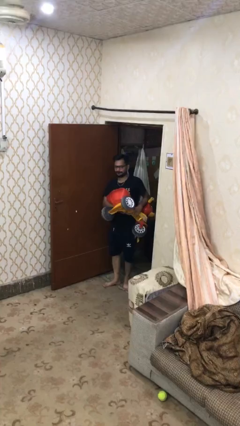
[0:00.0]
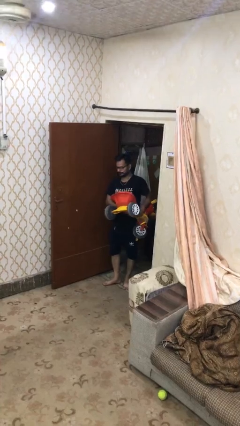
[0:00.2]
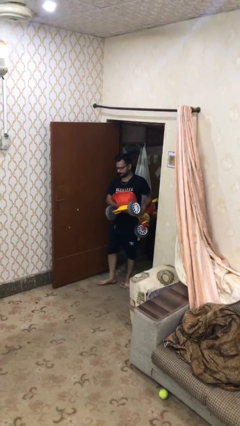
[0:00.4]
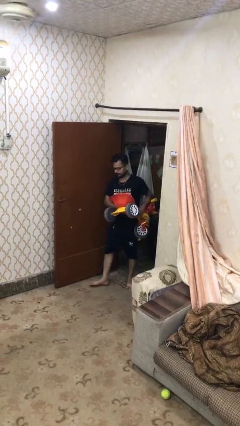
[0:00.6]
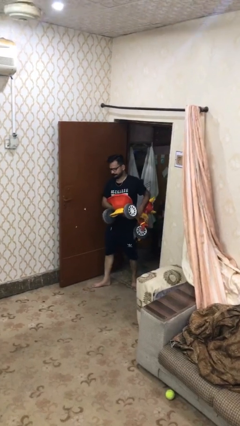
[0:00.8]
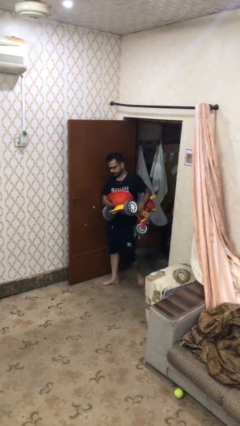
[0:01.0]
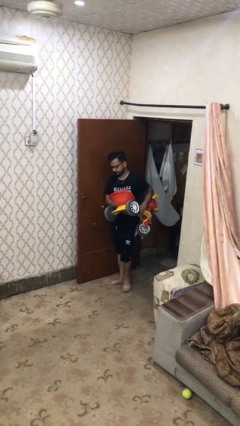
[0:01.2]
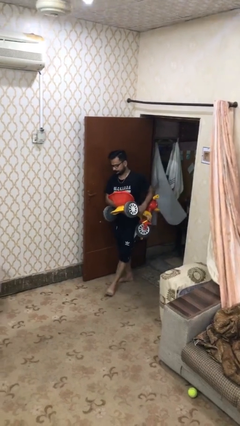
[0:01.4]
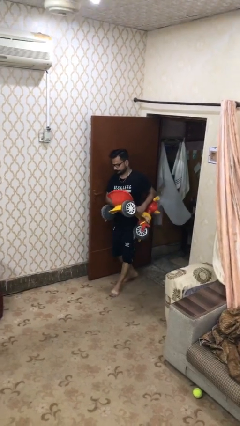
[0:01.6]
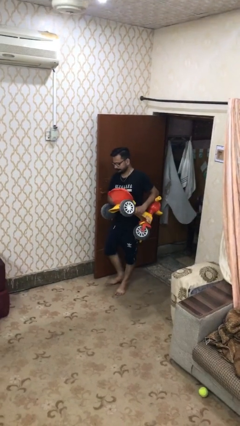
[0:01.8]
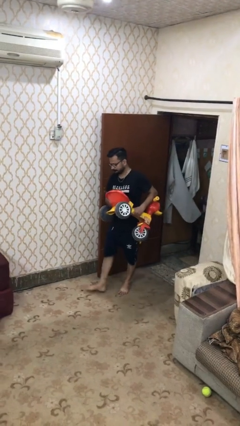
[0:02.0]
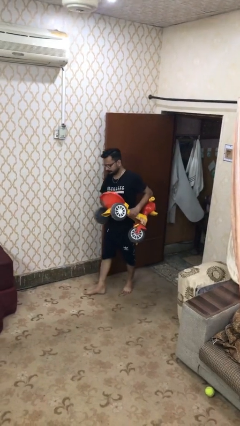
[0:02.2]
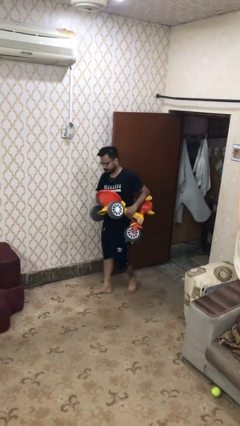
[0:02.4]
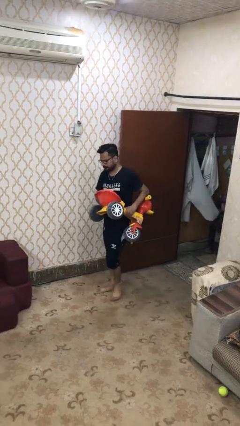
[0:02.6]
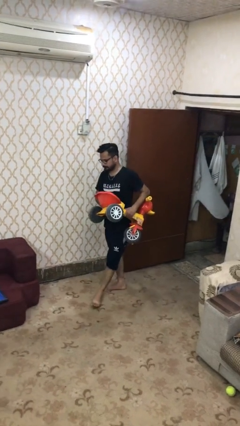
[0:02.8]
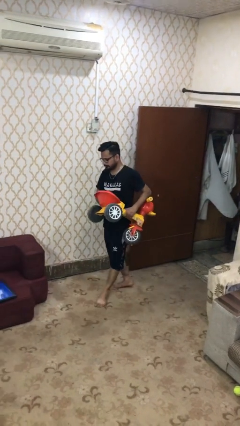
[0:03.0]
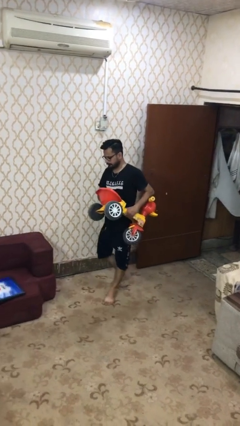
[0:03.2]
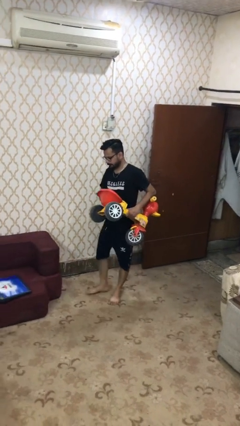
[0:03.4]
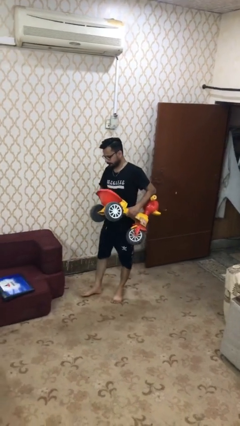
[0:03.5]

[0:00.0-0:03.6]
person carries heavy object

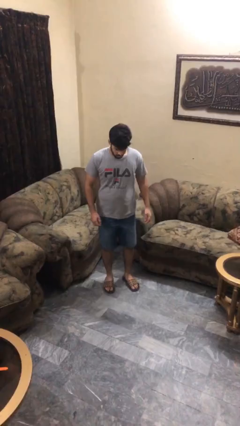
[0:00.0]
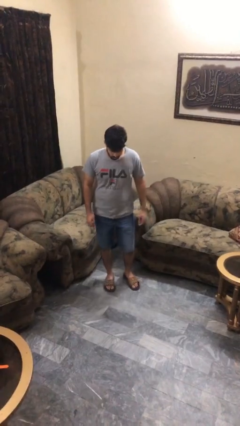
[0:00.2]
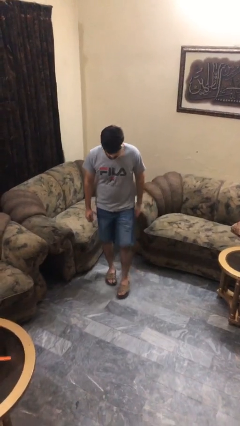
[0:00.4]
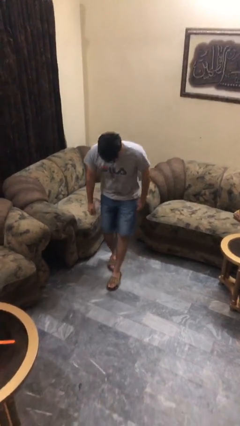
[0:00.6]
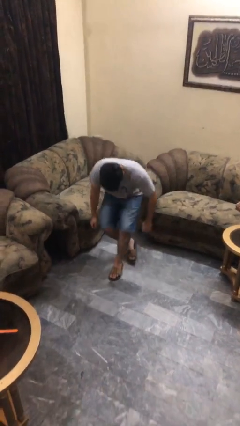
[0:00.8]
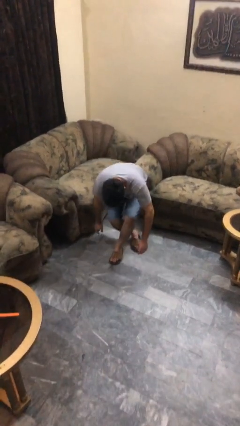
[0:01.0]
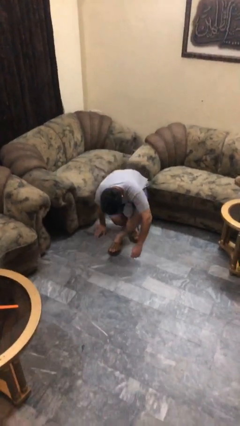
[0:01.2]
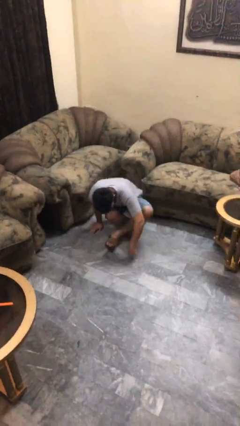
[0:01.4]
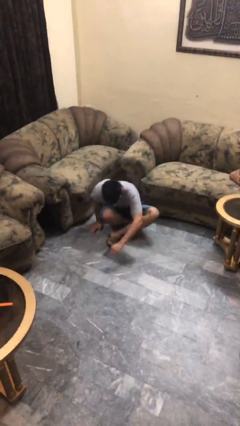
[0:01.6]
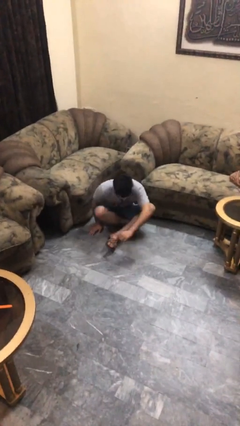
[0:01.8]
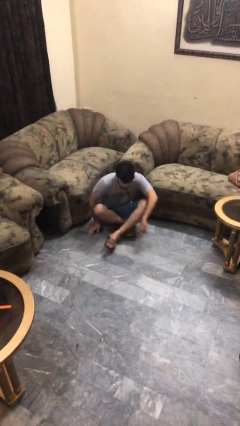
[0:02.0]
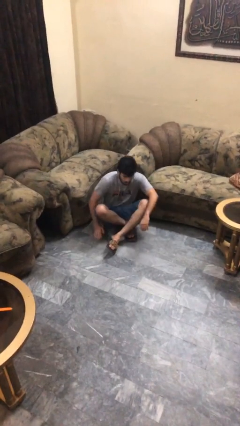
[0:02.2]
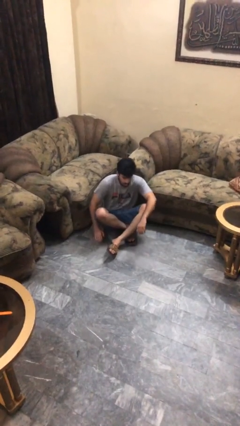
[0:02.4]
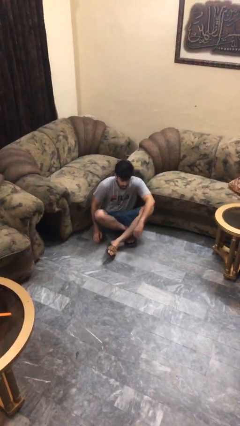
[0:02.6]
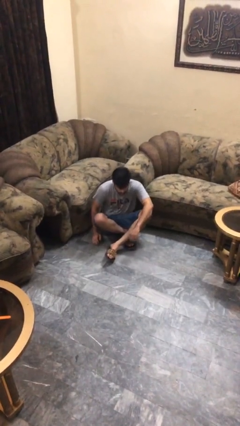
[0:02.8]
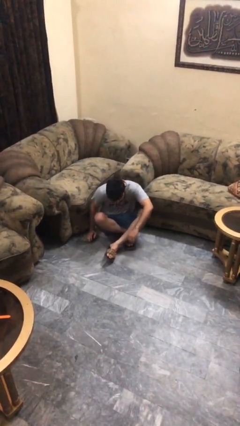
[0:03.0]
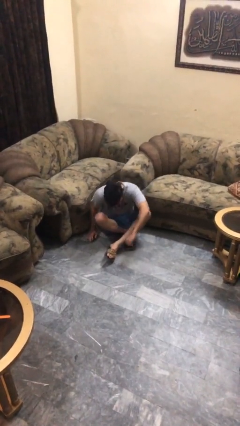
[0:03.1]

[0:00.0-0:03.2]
person sits crisscross

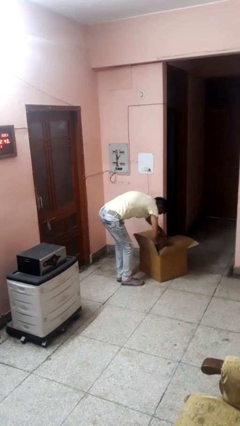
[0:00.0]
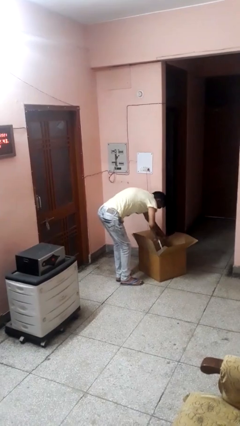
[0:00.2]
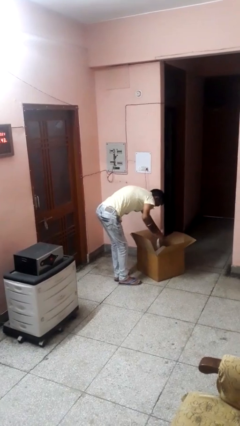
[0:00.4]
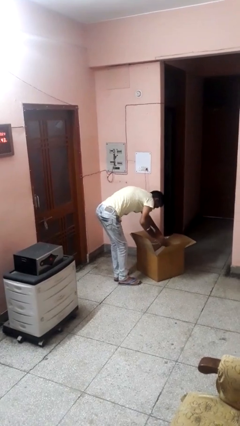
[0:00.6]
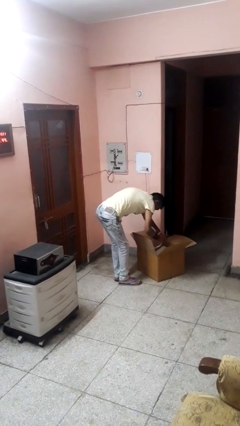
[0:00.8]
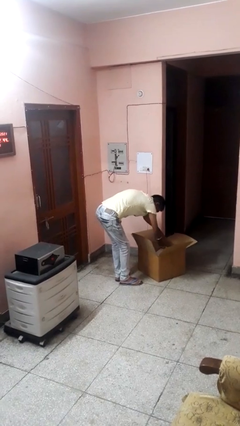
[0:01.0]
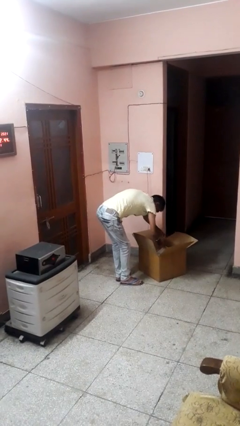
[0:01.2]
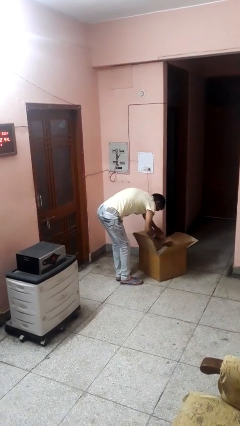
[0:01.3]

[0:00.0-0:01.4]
person searches in box

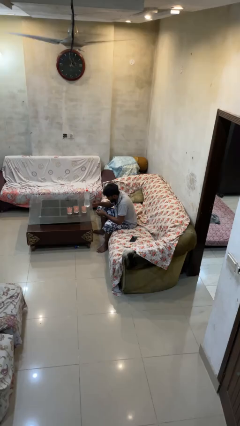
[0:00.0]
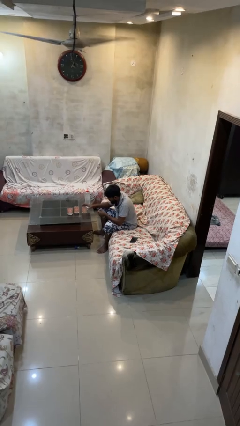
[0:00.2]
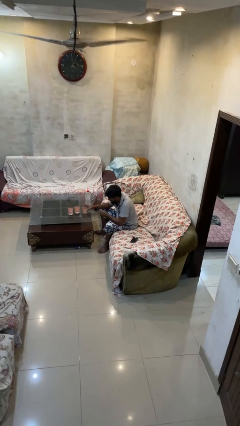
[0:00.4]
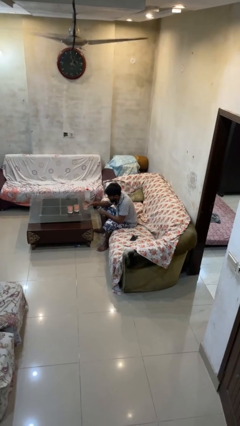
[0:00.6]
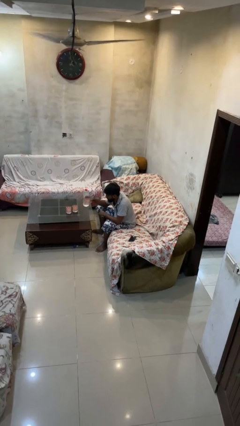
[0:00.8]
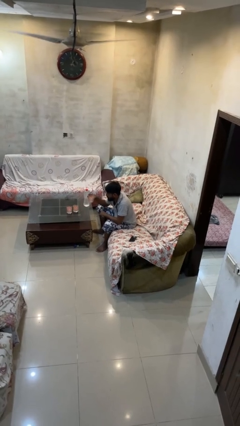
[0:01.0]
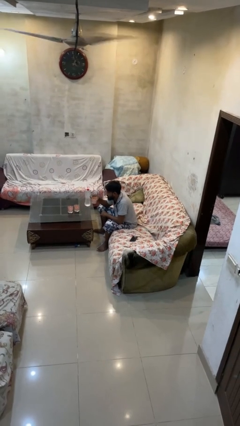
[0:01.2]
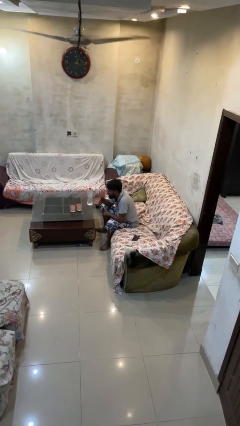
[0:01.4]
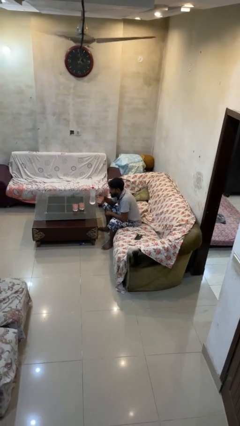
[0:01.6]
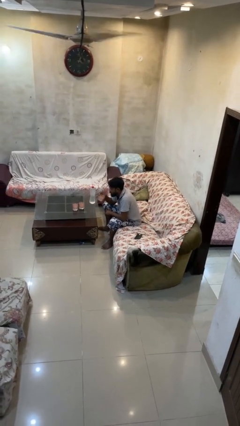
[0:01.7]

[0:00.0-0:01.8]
person picks up object from table

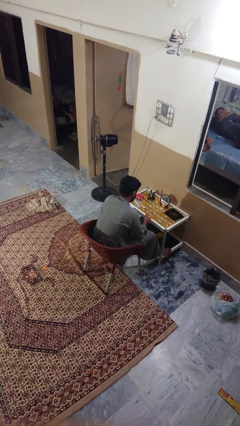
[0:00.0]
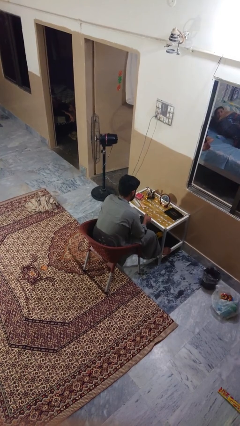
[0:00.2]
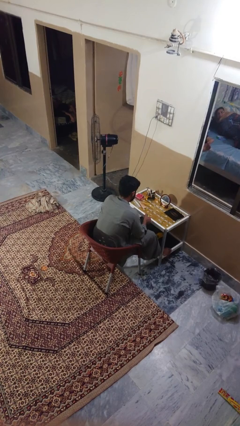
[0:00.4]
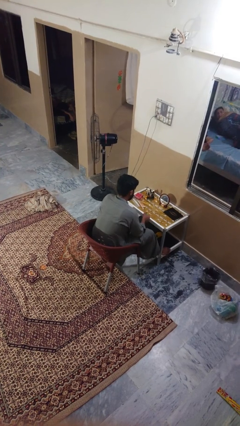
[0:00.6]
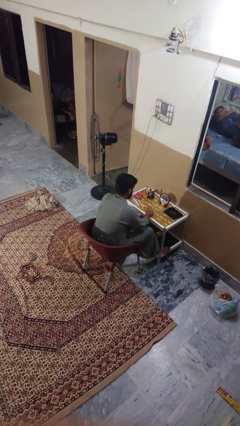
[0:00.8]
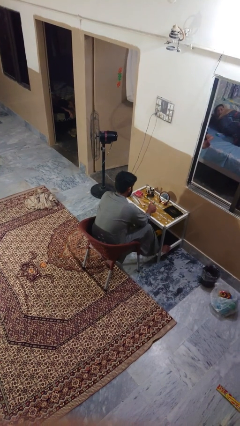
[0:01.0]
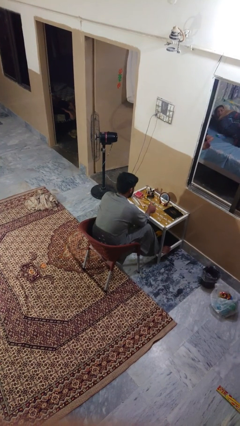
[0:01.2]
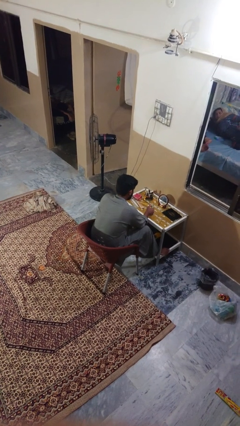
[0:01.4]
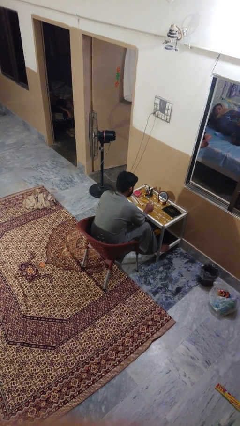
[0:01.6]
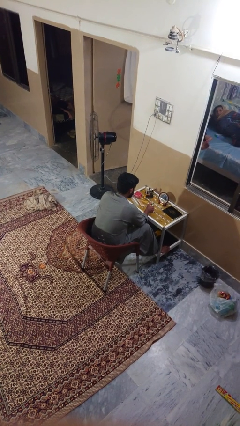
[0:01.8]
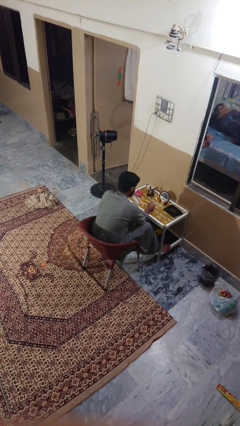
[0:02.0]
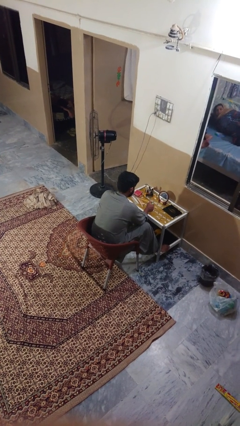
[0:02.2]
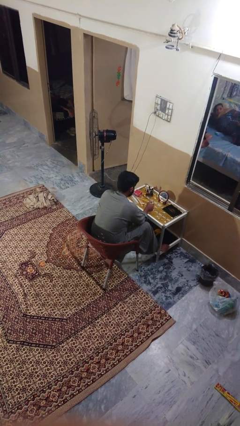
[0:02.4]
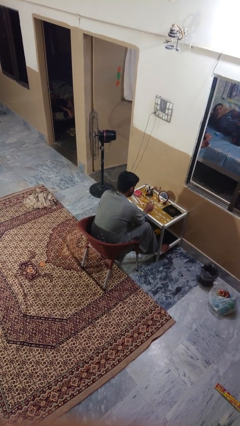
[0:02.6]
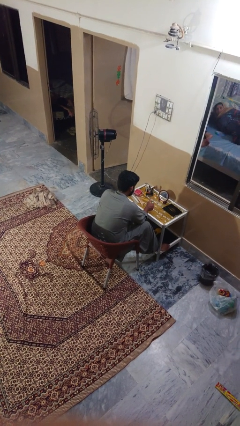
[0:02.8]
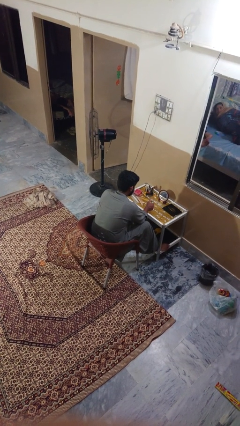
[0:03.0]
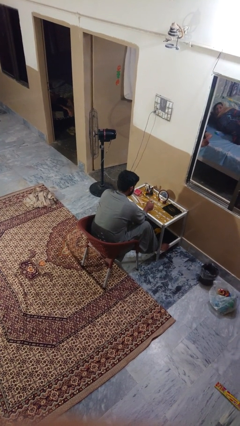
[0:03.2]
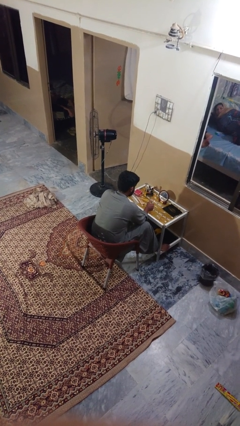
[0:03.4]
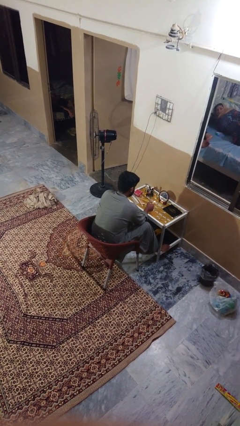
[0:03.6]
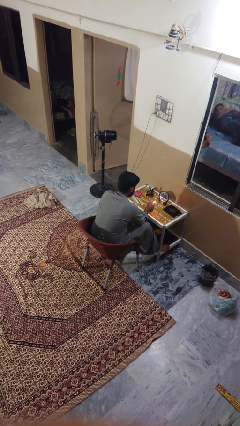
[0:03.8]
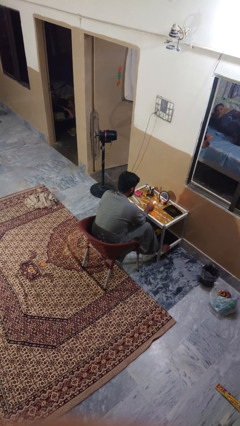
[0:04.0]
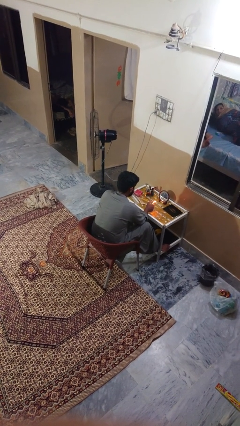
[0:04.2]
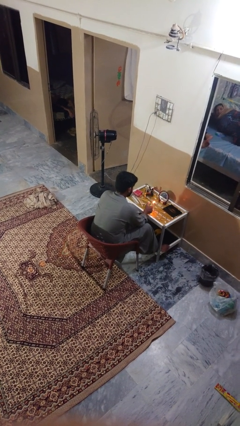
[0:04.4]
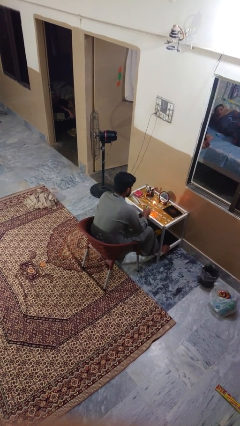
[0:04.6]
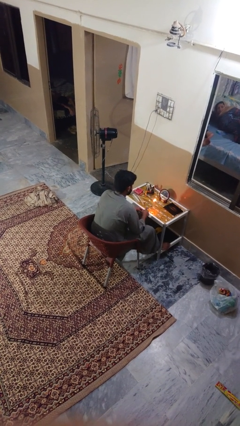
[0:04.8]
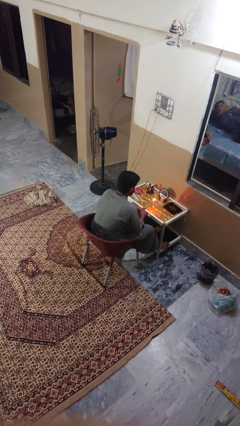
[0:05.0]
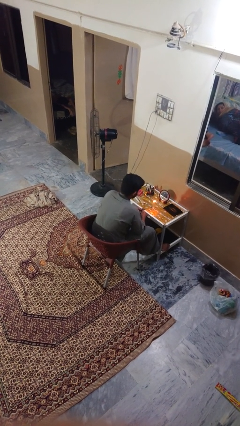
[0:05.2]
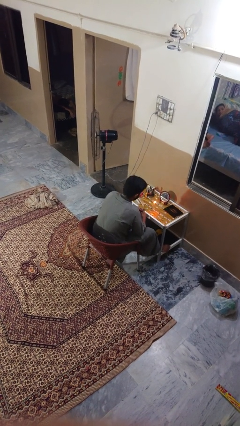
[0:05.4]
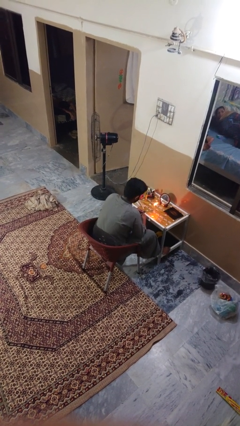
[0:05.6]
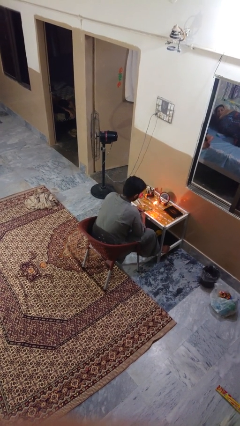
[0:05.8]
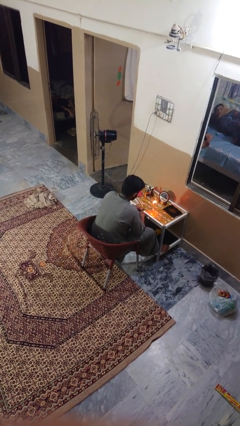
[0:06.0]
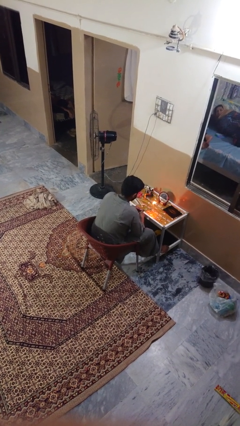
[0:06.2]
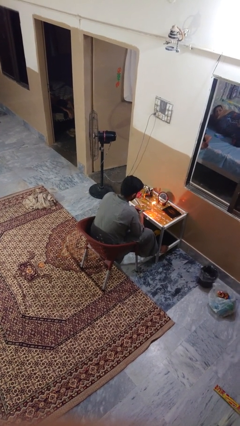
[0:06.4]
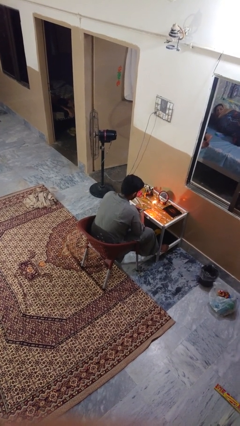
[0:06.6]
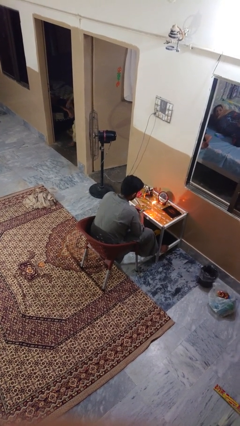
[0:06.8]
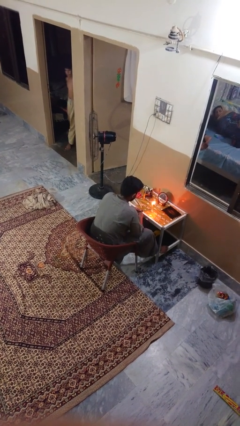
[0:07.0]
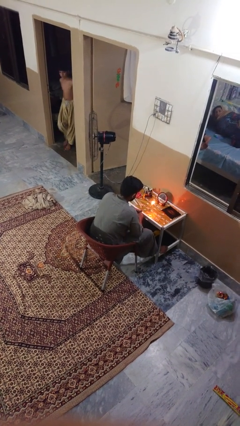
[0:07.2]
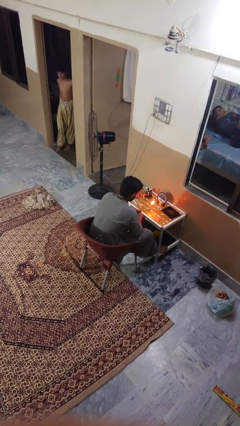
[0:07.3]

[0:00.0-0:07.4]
person lights candle
